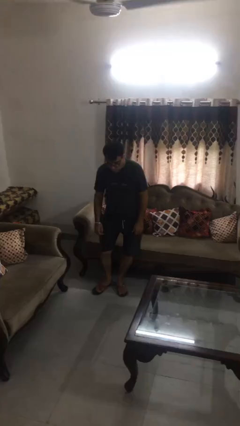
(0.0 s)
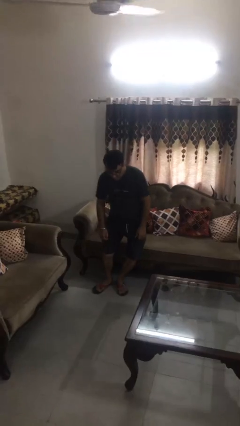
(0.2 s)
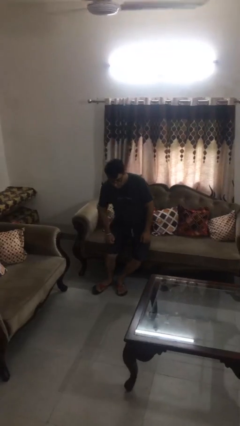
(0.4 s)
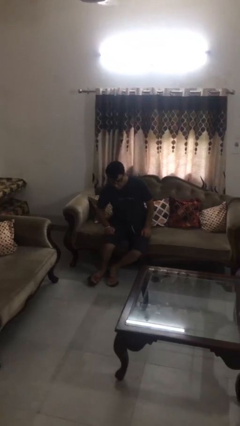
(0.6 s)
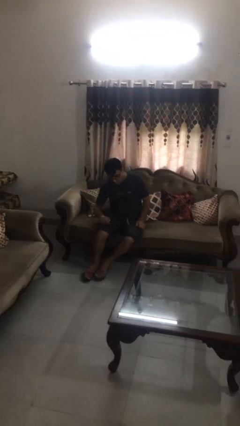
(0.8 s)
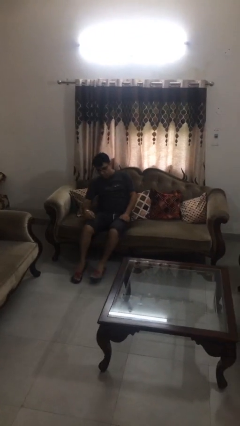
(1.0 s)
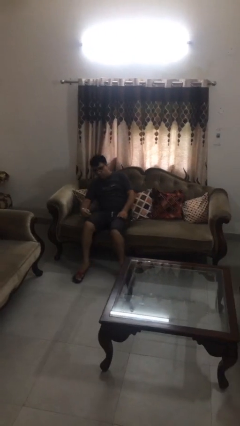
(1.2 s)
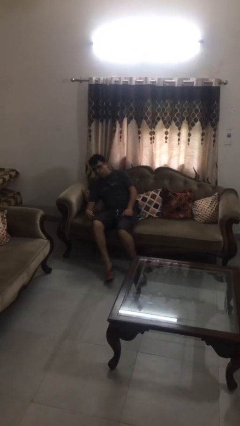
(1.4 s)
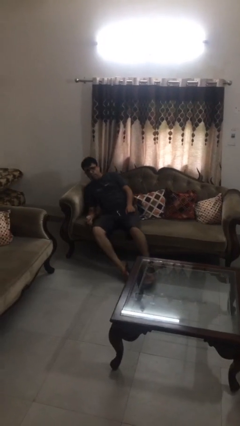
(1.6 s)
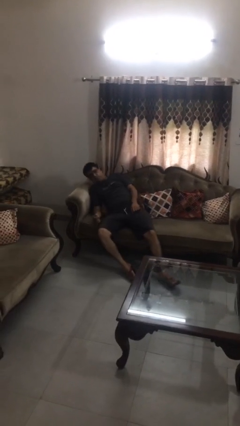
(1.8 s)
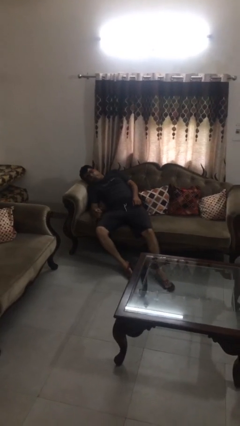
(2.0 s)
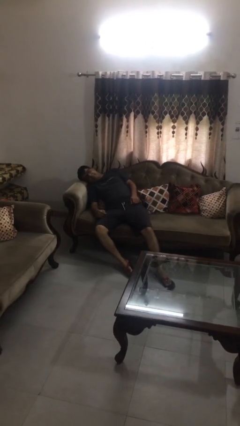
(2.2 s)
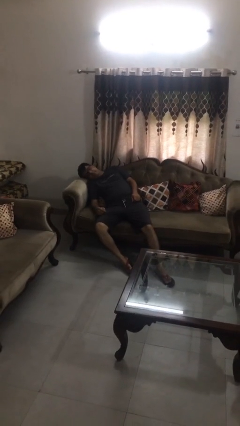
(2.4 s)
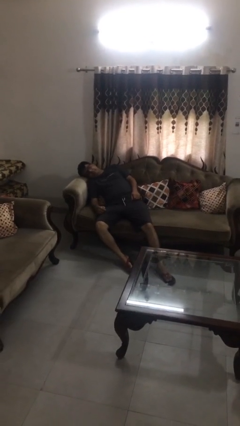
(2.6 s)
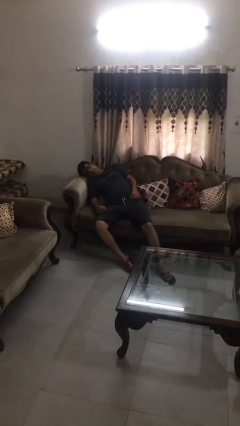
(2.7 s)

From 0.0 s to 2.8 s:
person lies down on couch

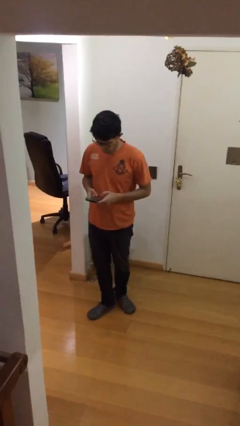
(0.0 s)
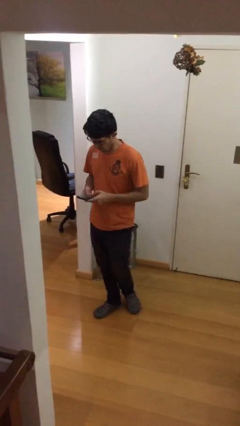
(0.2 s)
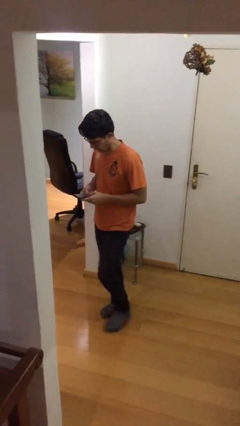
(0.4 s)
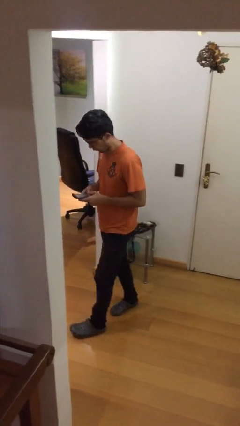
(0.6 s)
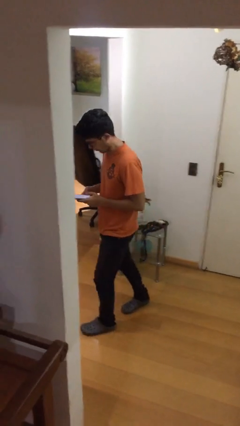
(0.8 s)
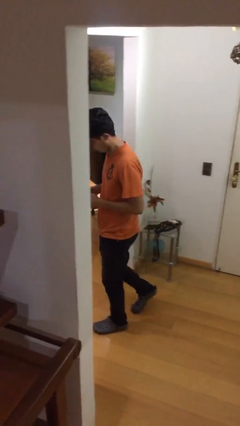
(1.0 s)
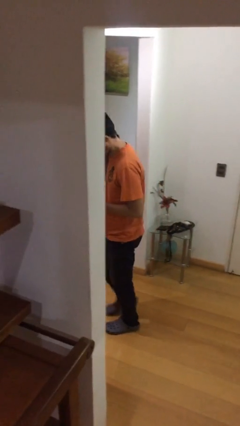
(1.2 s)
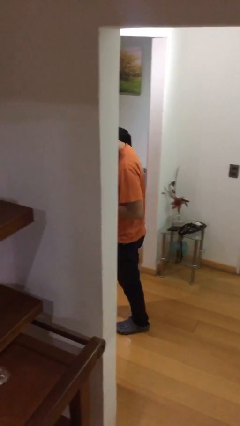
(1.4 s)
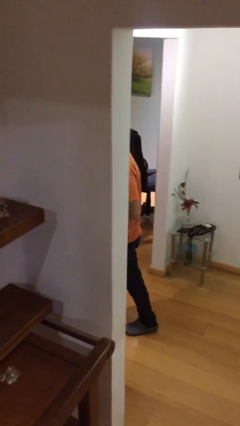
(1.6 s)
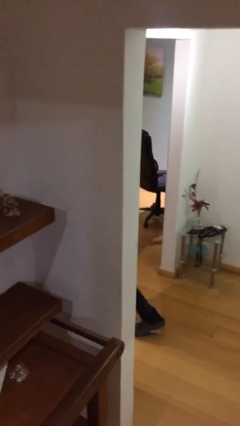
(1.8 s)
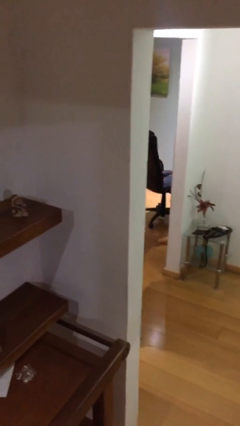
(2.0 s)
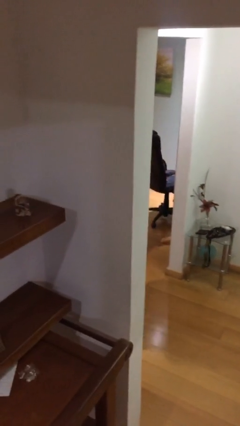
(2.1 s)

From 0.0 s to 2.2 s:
person exits scene through structure

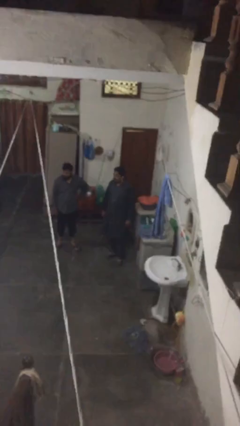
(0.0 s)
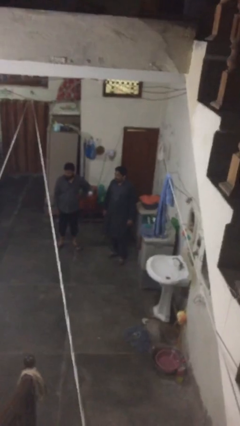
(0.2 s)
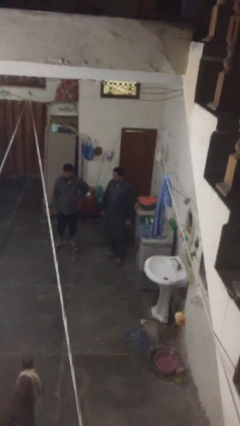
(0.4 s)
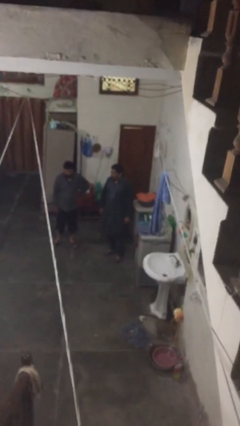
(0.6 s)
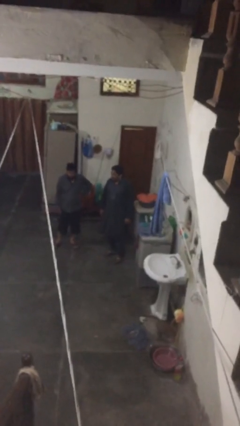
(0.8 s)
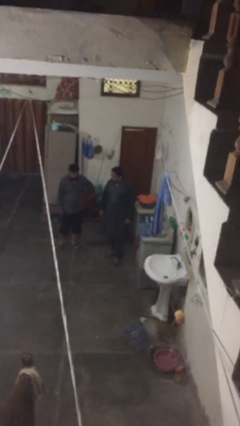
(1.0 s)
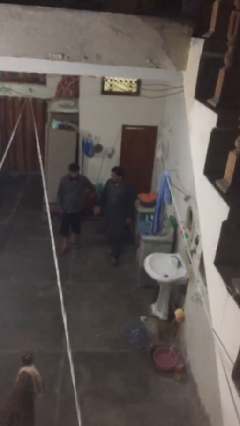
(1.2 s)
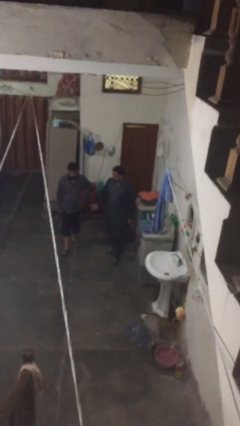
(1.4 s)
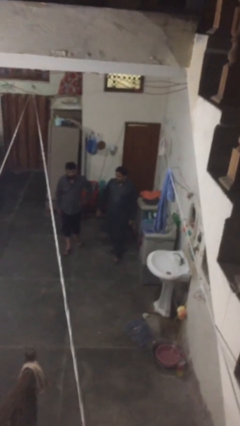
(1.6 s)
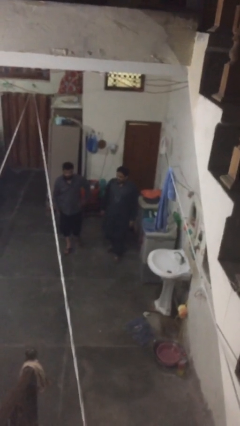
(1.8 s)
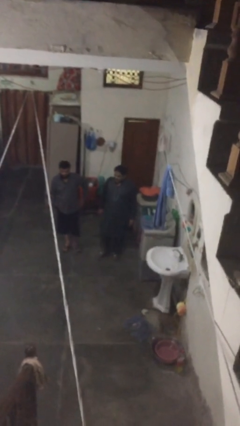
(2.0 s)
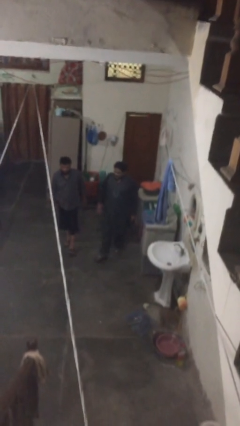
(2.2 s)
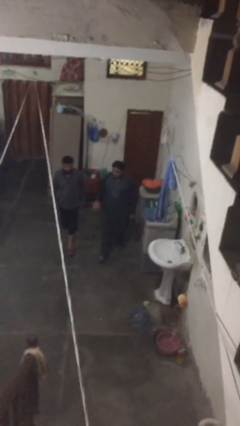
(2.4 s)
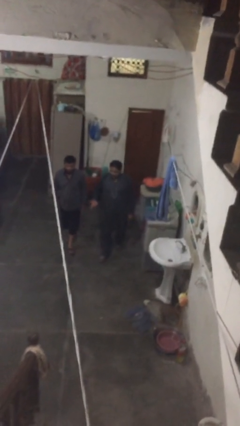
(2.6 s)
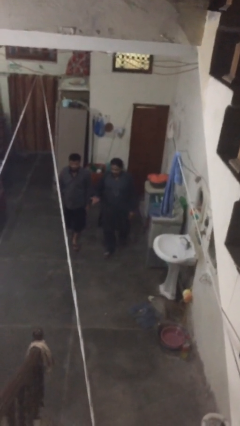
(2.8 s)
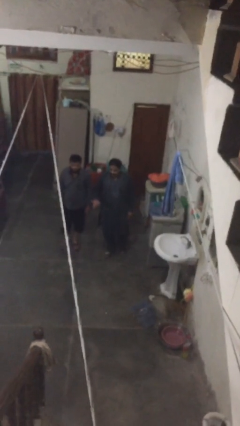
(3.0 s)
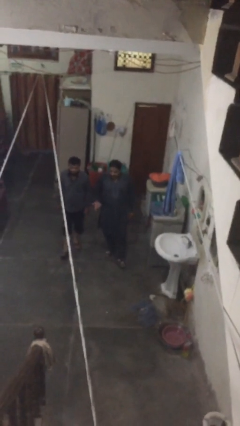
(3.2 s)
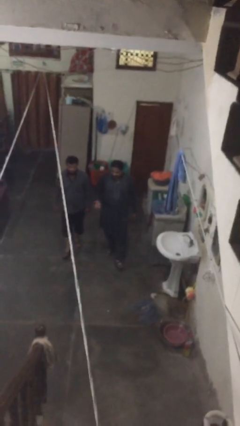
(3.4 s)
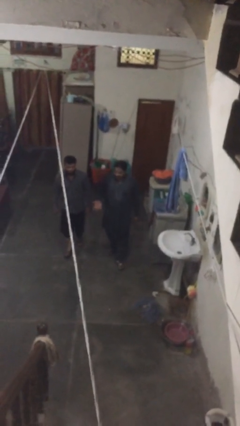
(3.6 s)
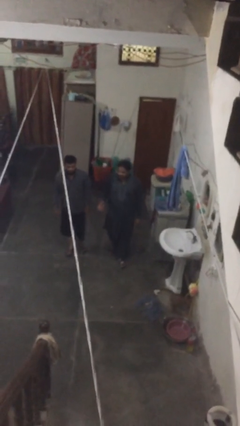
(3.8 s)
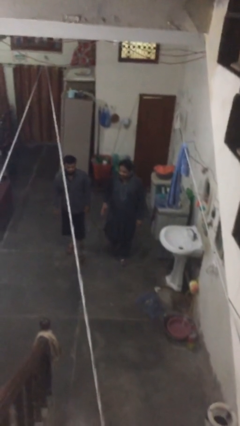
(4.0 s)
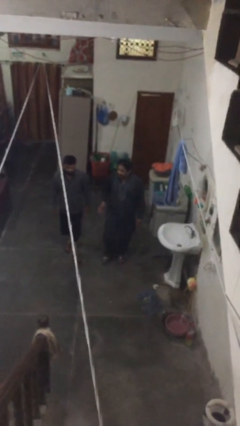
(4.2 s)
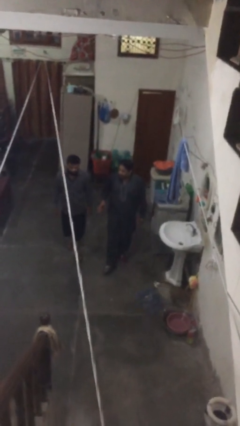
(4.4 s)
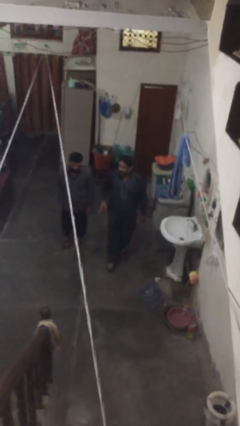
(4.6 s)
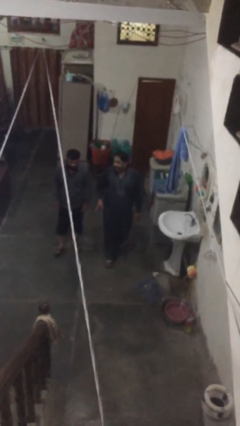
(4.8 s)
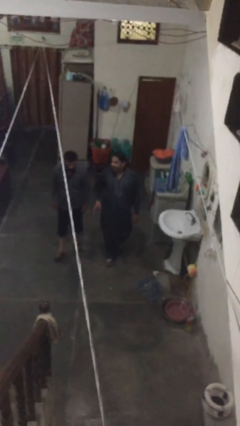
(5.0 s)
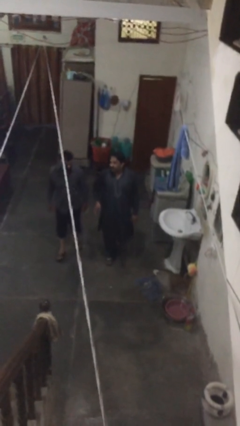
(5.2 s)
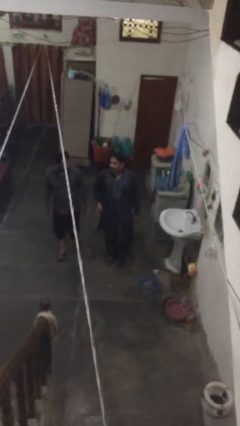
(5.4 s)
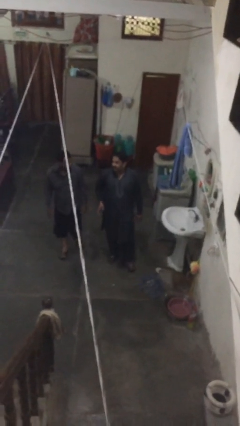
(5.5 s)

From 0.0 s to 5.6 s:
person talks to person

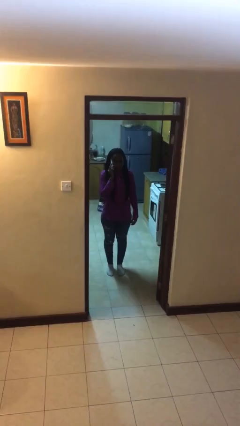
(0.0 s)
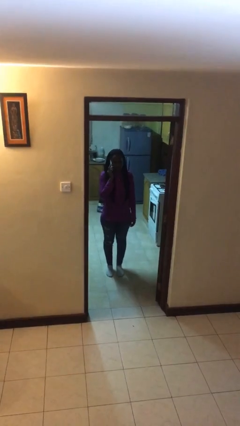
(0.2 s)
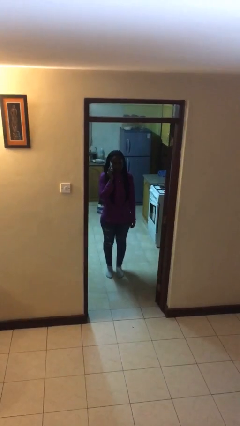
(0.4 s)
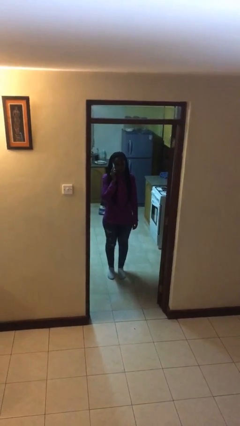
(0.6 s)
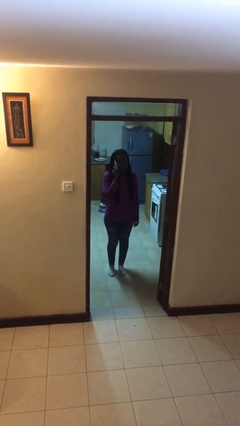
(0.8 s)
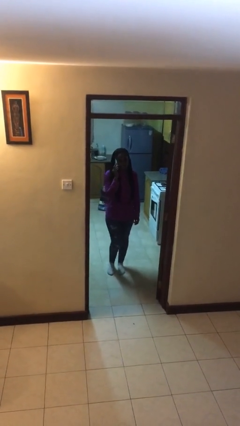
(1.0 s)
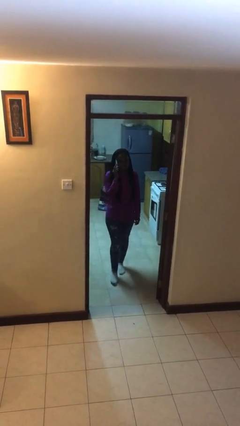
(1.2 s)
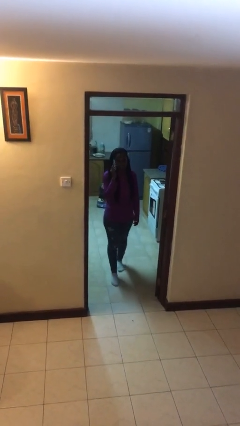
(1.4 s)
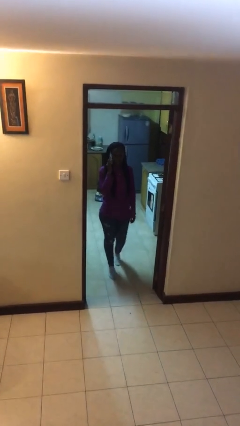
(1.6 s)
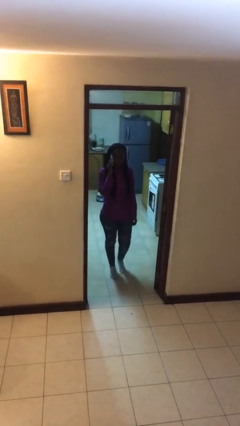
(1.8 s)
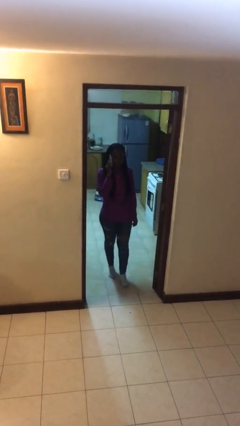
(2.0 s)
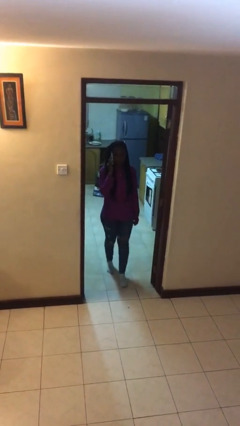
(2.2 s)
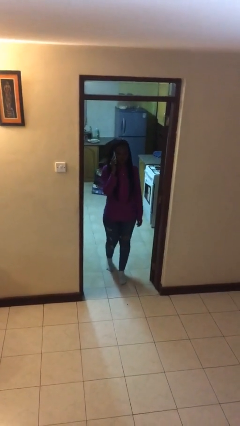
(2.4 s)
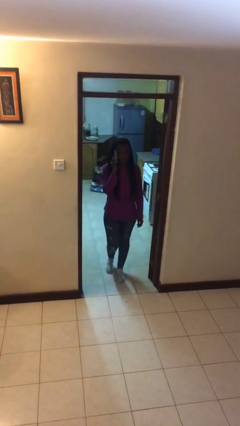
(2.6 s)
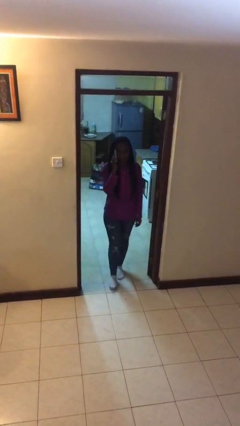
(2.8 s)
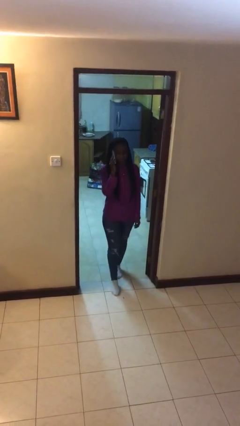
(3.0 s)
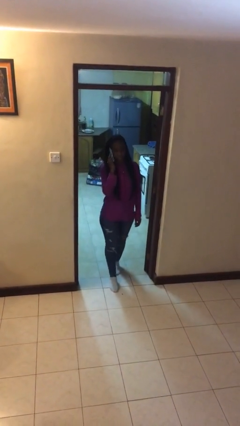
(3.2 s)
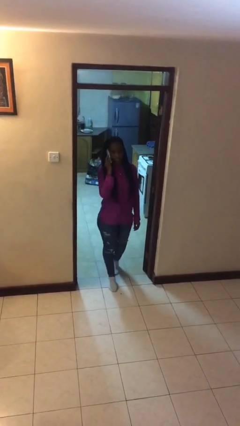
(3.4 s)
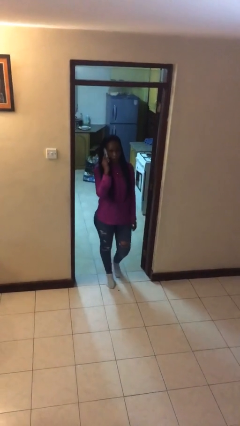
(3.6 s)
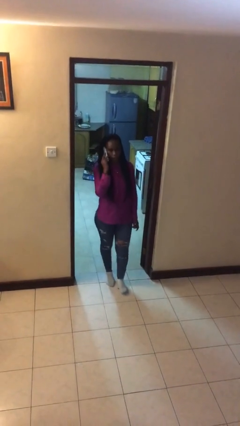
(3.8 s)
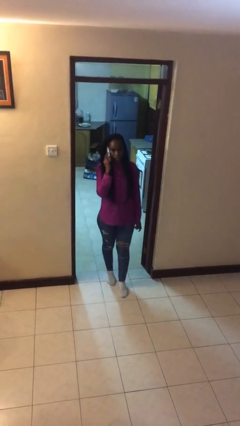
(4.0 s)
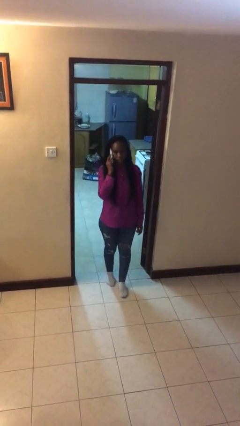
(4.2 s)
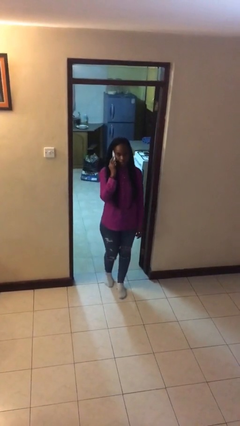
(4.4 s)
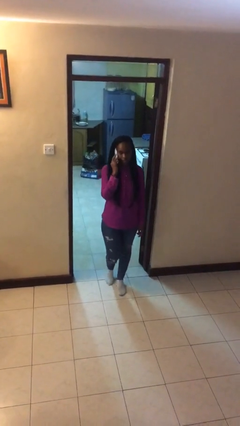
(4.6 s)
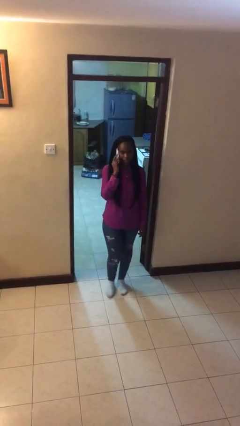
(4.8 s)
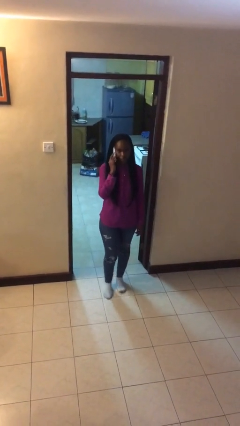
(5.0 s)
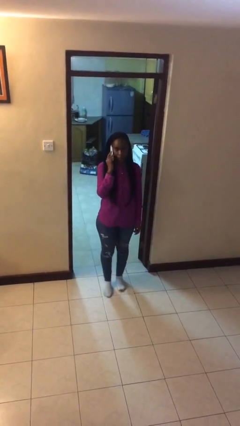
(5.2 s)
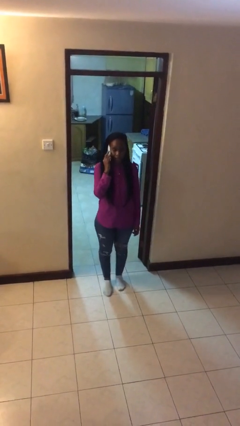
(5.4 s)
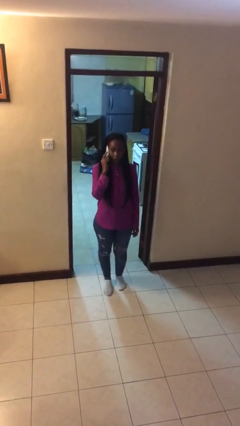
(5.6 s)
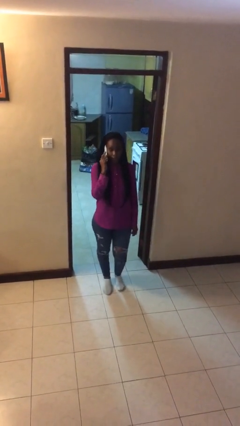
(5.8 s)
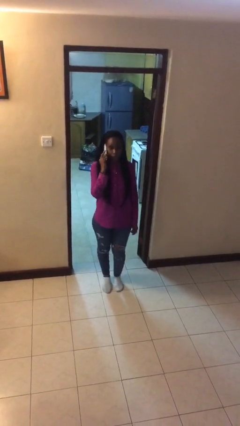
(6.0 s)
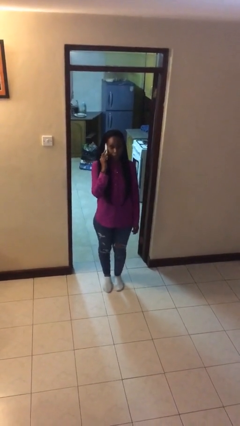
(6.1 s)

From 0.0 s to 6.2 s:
person enters scene through structure

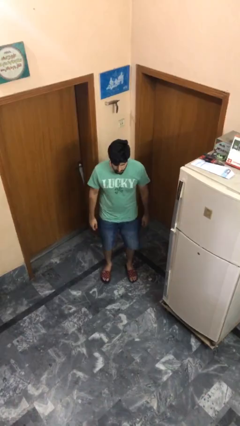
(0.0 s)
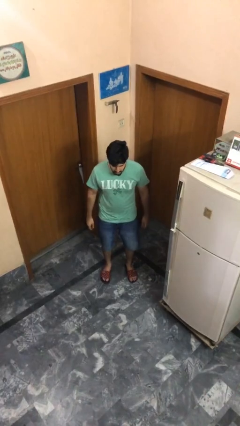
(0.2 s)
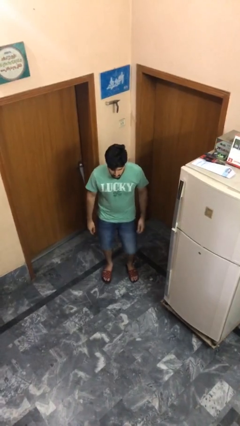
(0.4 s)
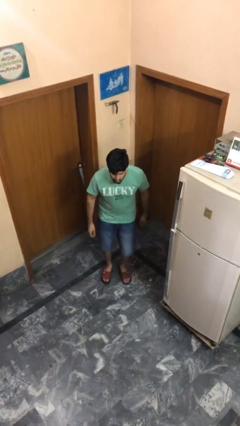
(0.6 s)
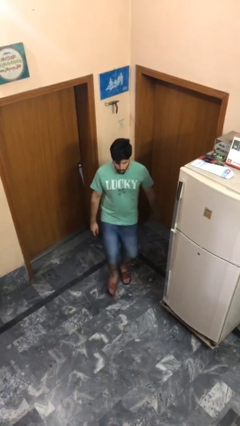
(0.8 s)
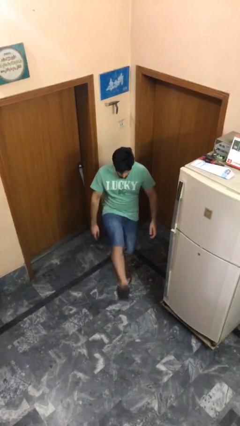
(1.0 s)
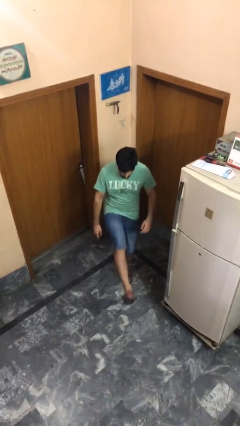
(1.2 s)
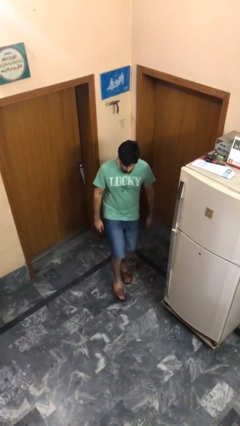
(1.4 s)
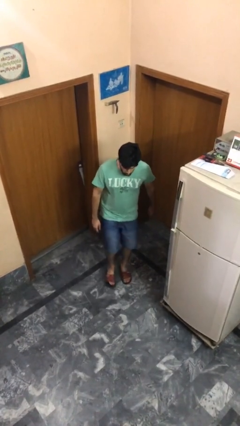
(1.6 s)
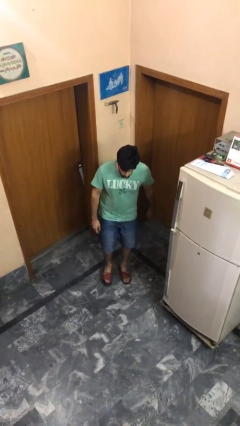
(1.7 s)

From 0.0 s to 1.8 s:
person karate kicks
